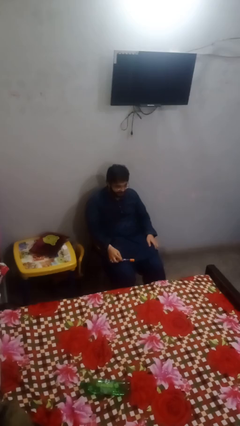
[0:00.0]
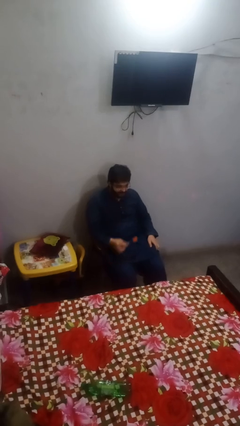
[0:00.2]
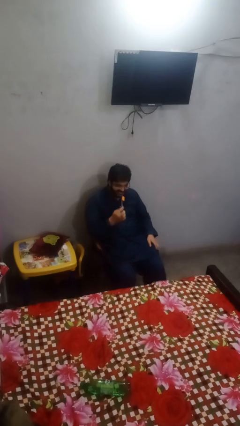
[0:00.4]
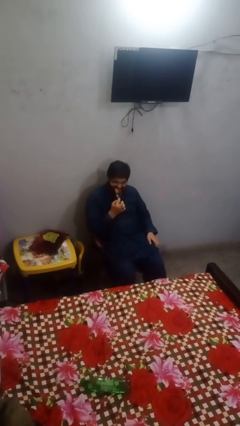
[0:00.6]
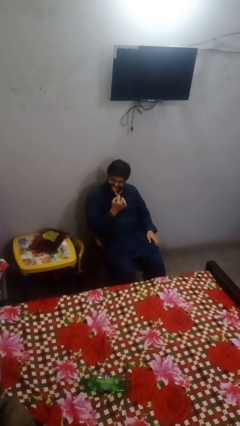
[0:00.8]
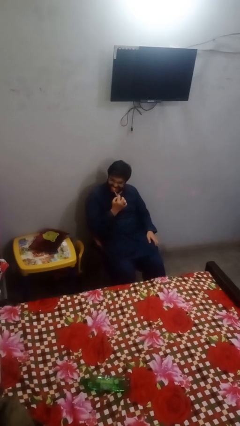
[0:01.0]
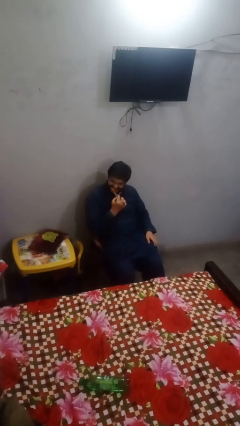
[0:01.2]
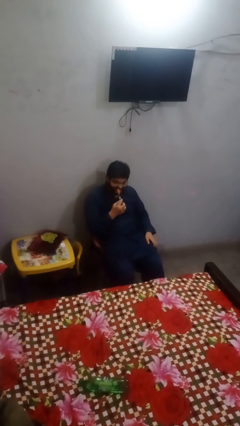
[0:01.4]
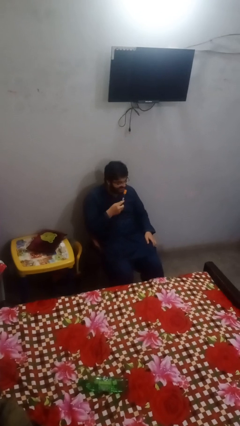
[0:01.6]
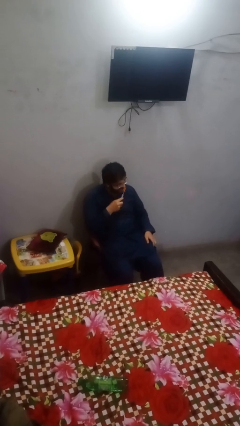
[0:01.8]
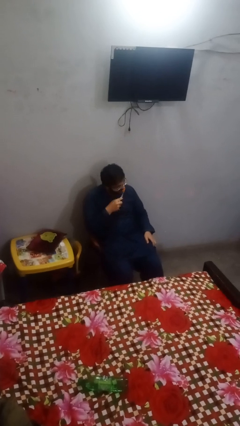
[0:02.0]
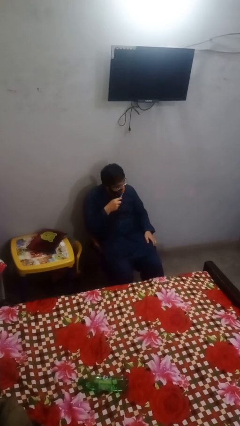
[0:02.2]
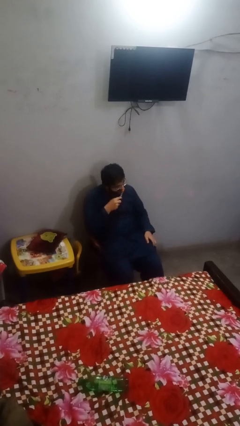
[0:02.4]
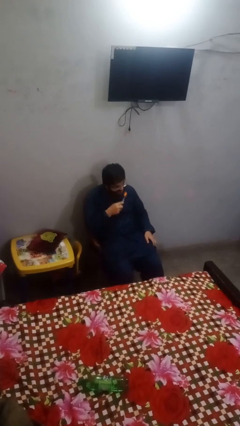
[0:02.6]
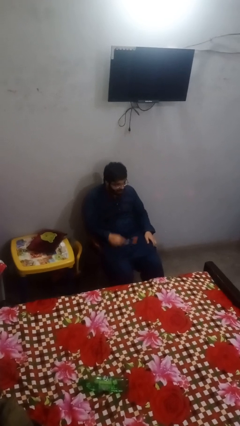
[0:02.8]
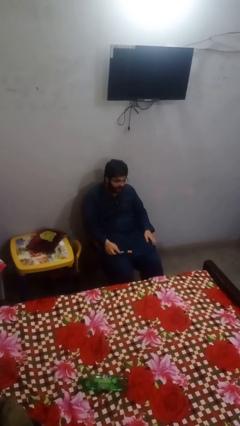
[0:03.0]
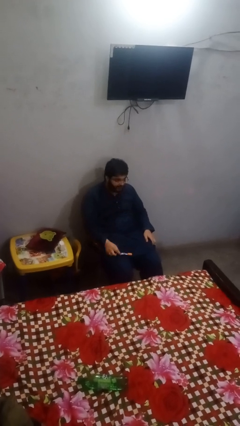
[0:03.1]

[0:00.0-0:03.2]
person brushes teeth

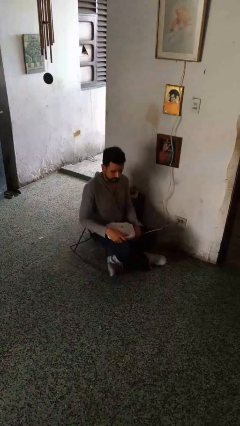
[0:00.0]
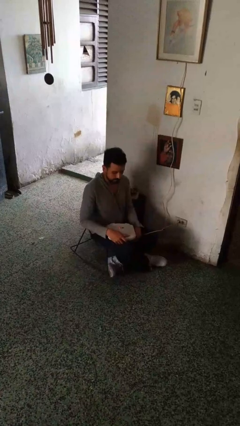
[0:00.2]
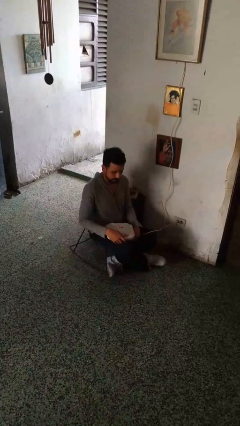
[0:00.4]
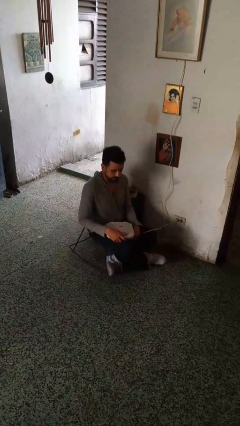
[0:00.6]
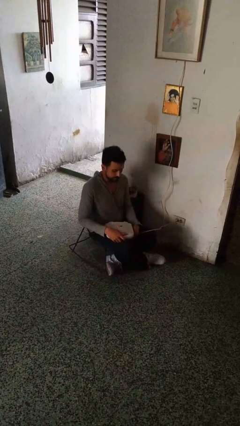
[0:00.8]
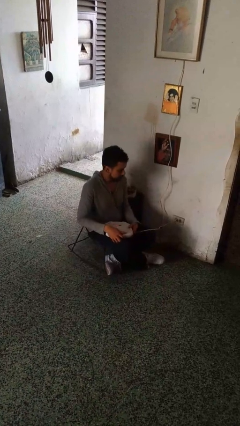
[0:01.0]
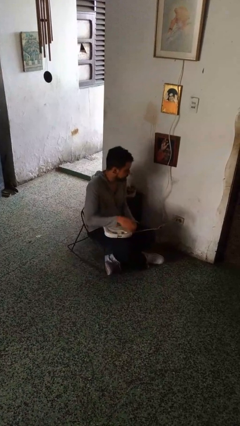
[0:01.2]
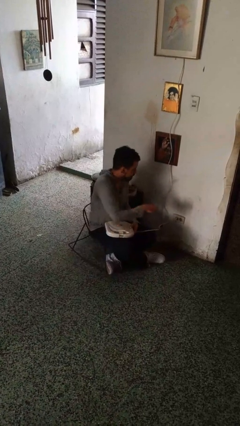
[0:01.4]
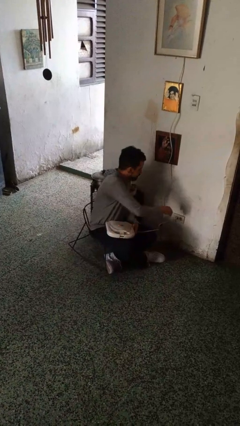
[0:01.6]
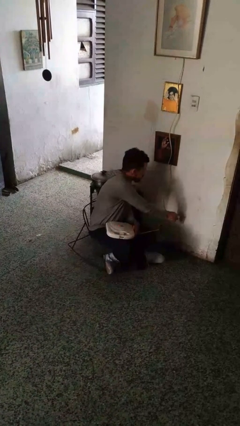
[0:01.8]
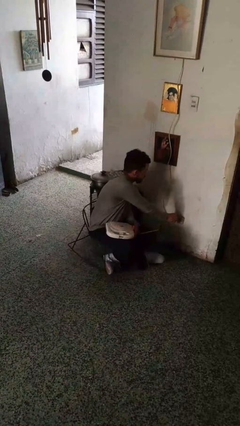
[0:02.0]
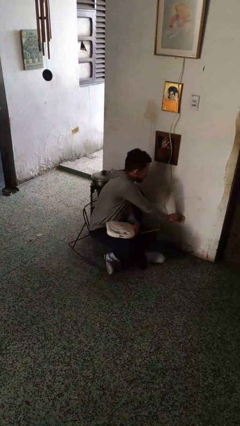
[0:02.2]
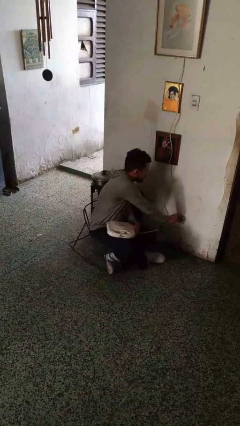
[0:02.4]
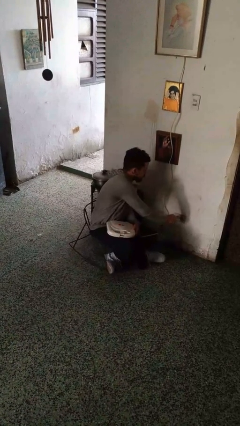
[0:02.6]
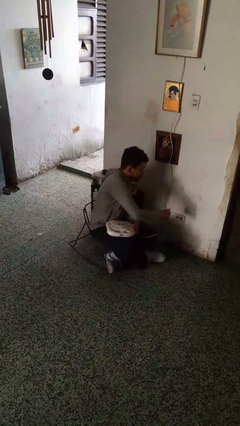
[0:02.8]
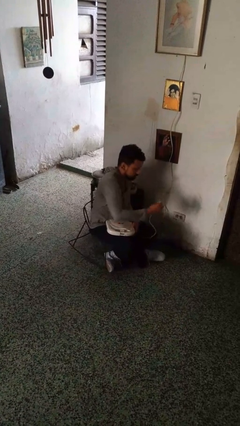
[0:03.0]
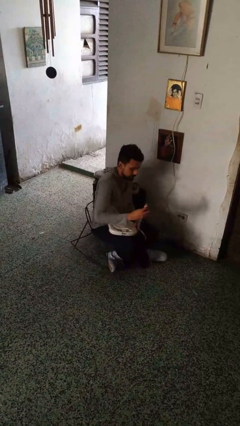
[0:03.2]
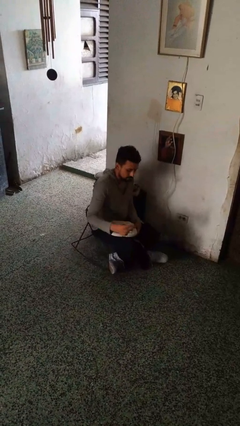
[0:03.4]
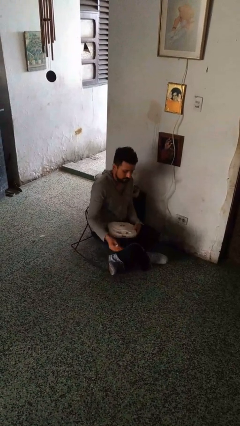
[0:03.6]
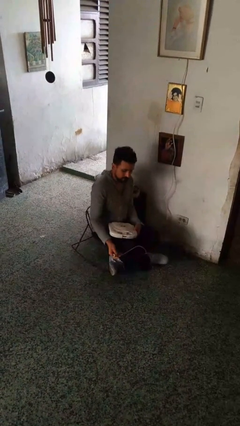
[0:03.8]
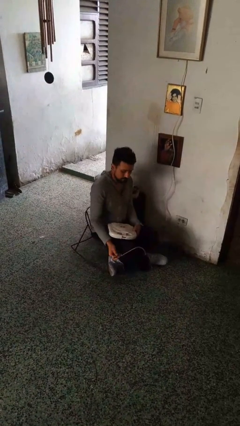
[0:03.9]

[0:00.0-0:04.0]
person unplugs from electrical socket

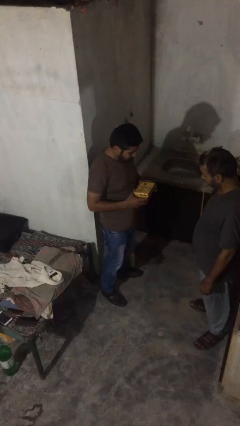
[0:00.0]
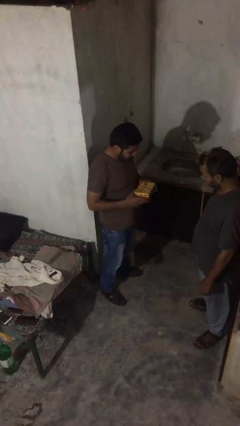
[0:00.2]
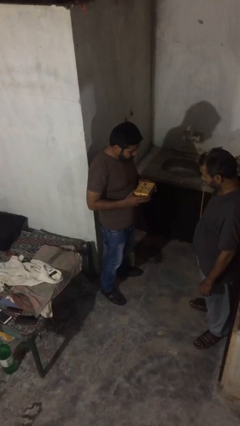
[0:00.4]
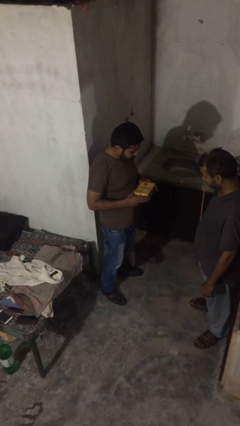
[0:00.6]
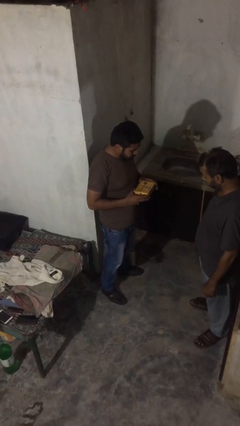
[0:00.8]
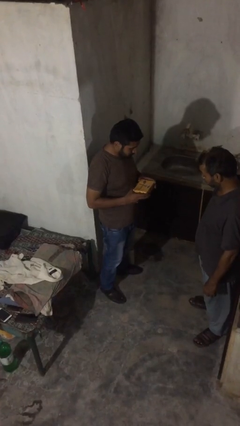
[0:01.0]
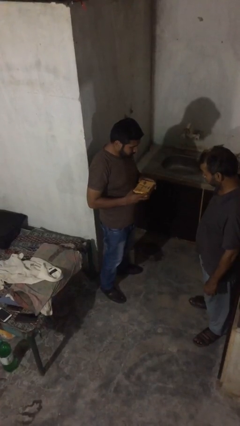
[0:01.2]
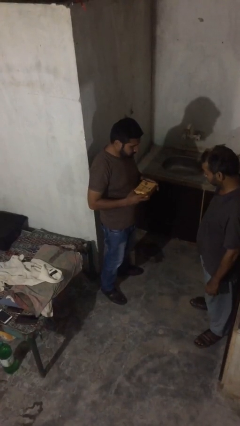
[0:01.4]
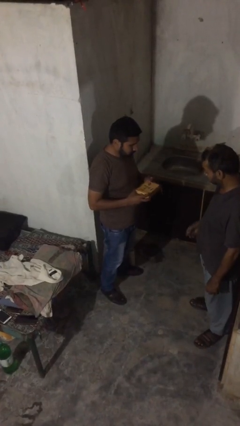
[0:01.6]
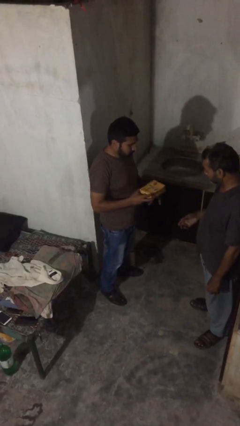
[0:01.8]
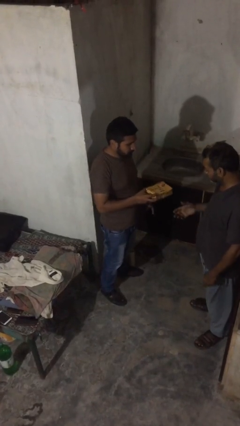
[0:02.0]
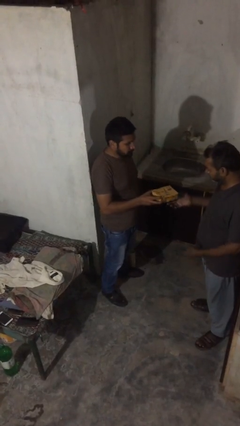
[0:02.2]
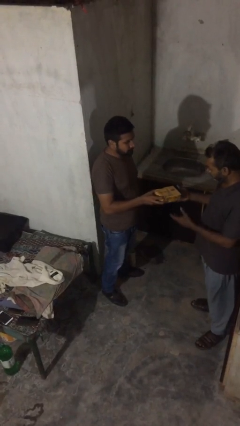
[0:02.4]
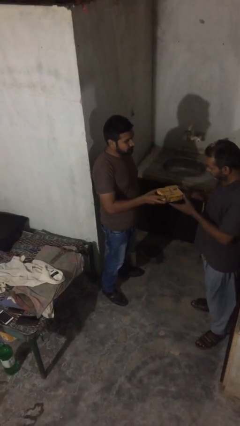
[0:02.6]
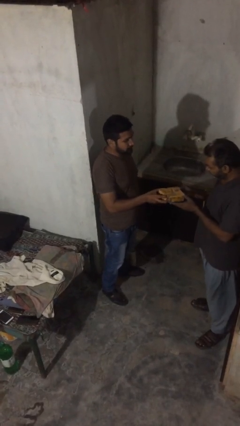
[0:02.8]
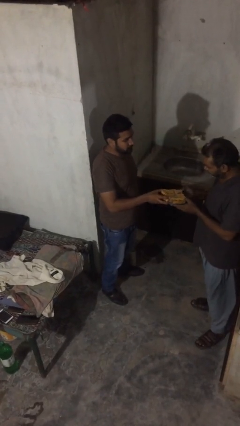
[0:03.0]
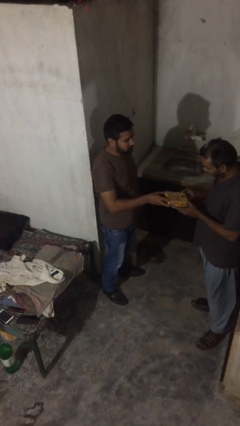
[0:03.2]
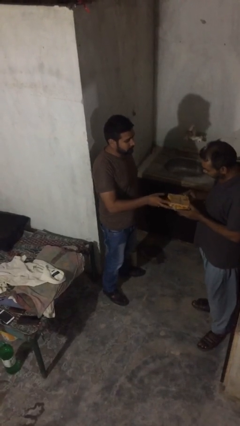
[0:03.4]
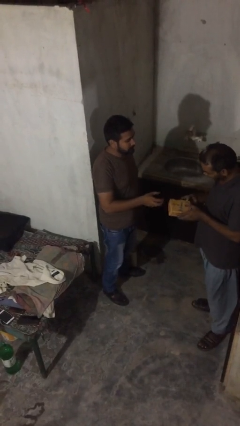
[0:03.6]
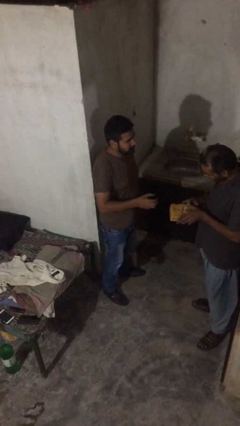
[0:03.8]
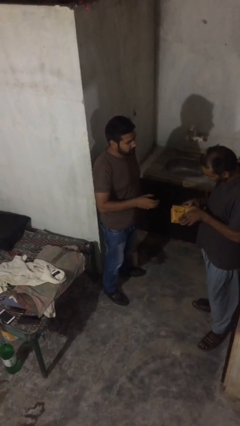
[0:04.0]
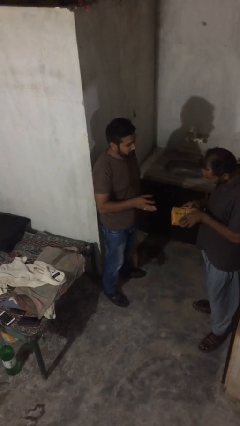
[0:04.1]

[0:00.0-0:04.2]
person transfers object to person

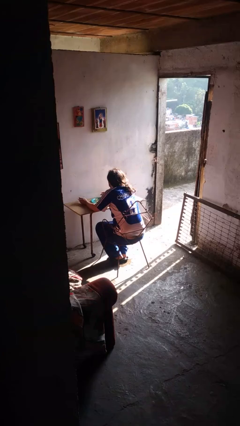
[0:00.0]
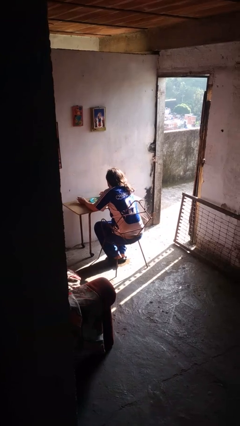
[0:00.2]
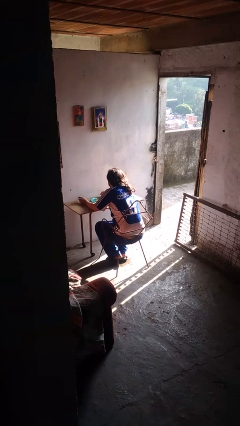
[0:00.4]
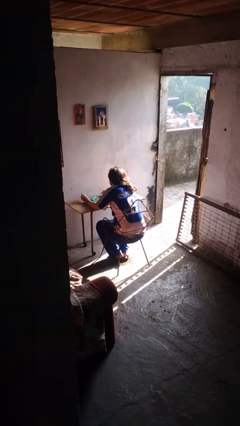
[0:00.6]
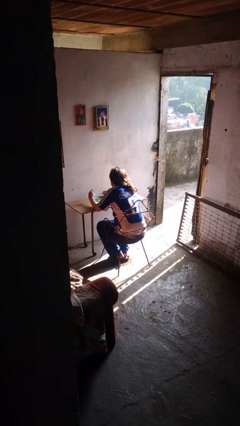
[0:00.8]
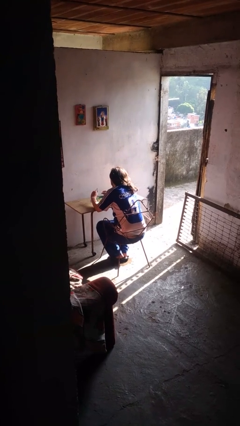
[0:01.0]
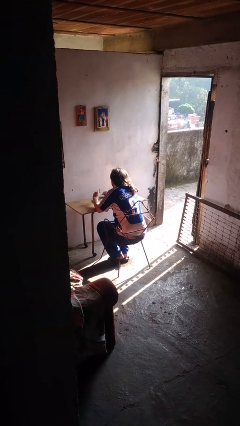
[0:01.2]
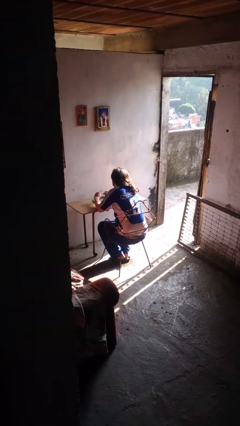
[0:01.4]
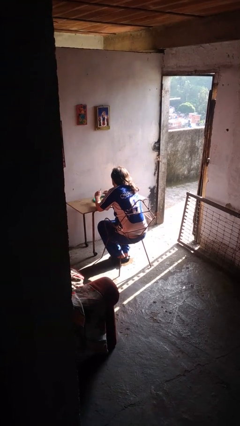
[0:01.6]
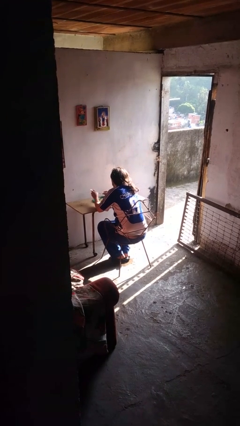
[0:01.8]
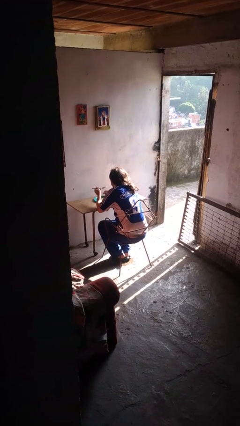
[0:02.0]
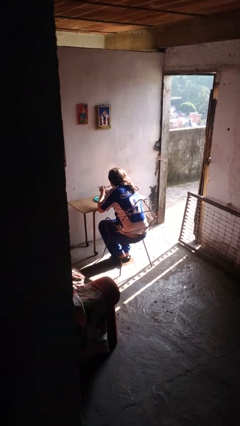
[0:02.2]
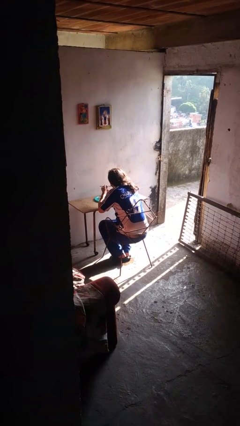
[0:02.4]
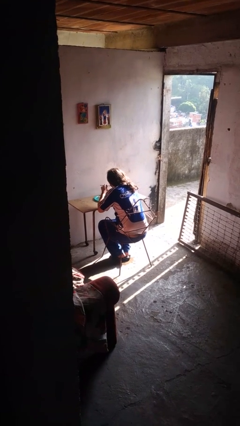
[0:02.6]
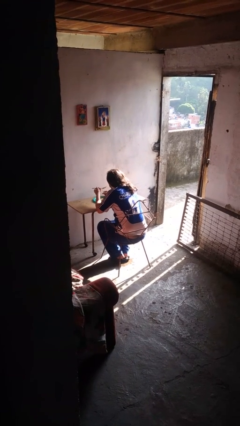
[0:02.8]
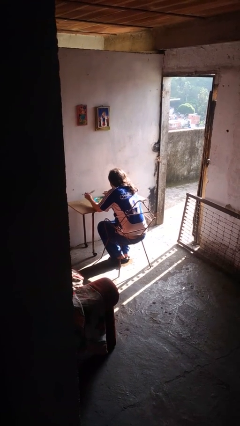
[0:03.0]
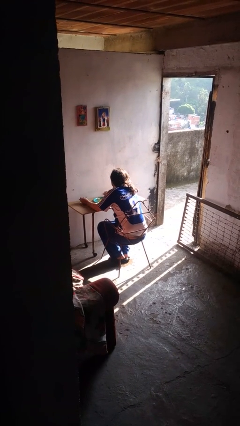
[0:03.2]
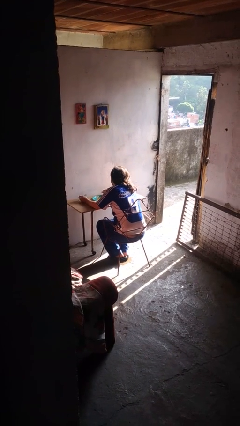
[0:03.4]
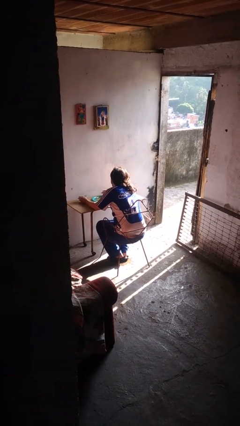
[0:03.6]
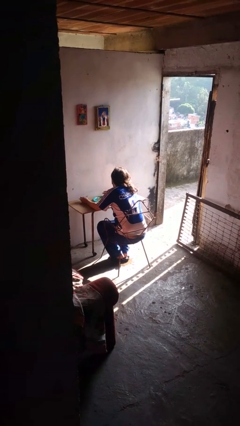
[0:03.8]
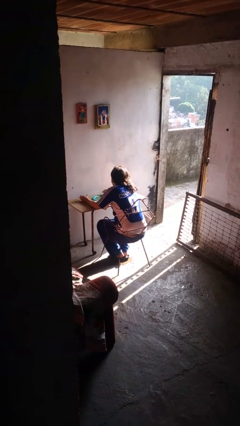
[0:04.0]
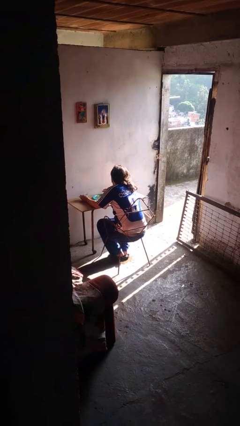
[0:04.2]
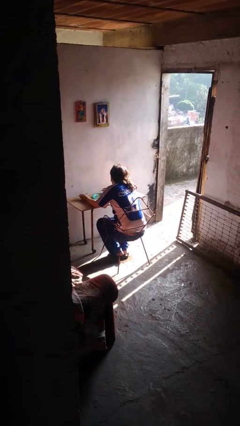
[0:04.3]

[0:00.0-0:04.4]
person eats with utensil

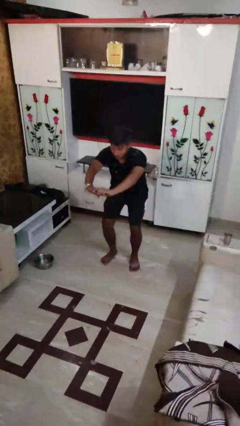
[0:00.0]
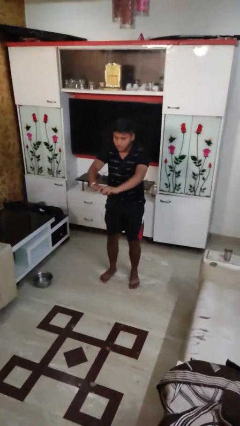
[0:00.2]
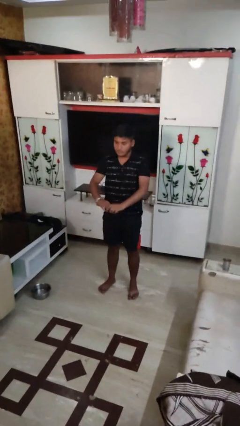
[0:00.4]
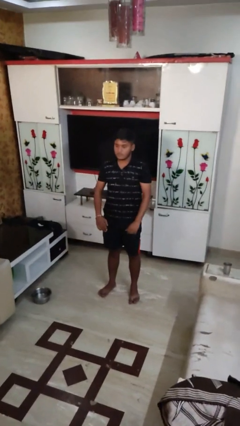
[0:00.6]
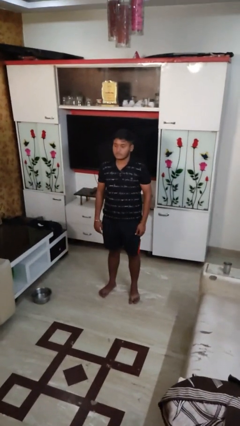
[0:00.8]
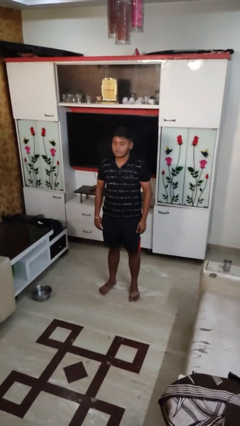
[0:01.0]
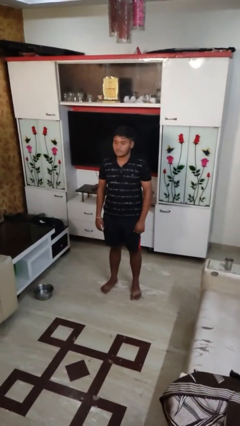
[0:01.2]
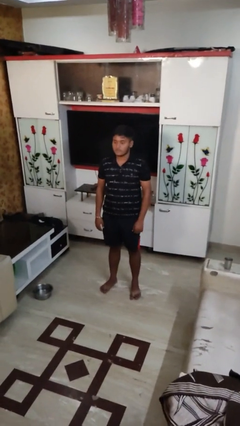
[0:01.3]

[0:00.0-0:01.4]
person stands up

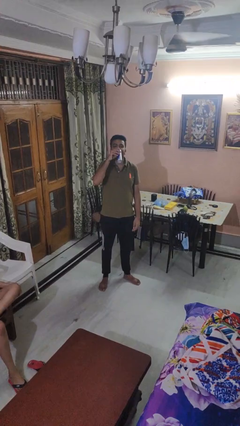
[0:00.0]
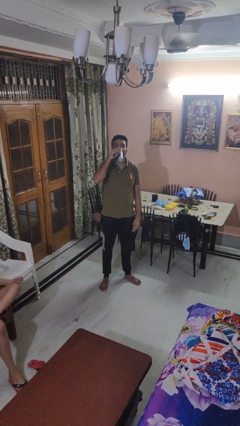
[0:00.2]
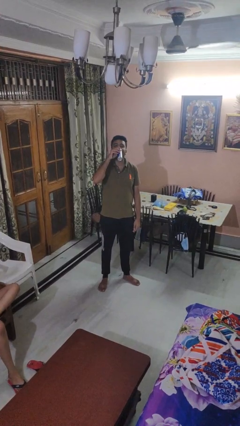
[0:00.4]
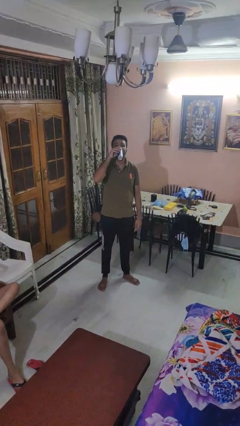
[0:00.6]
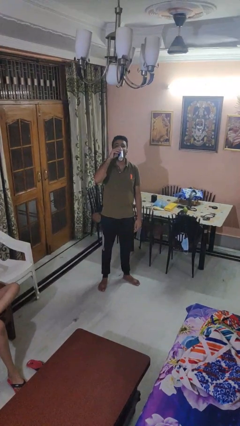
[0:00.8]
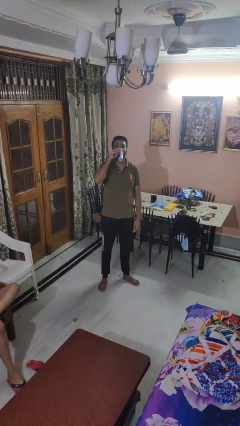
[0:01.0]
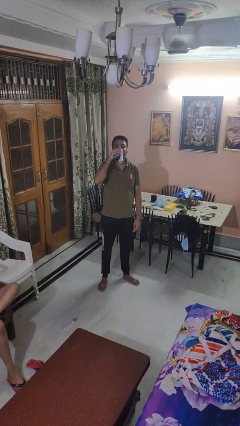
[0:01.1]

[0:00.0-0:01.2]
person drinks from beverage can
